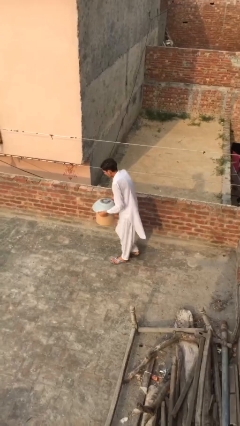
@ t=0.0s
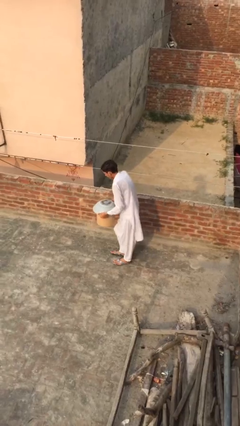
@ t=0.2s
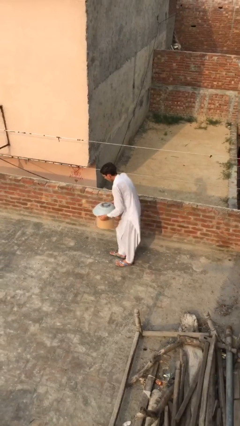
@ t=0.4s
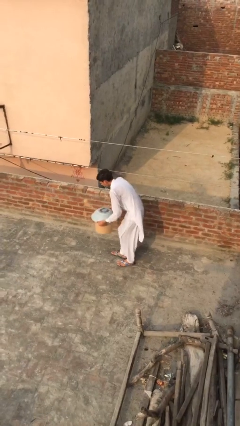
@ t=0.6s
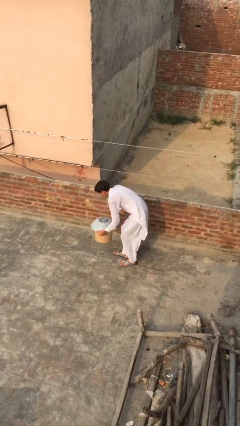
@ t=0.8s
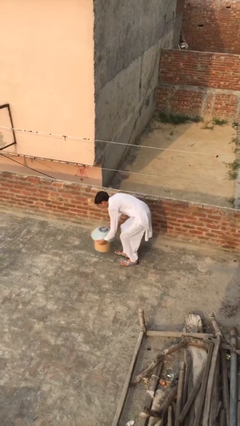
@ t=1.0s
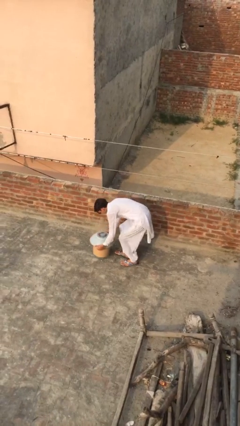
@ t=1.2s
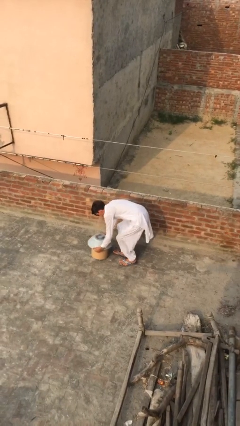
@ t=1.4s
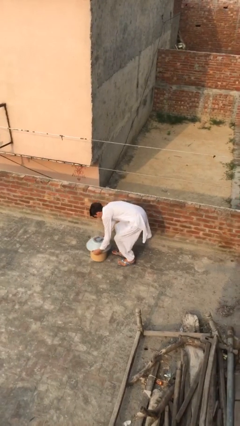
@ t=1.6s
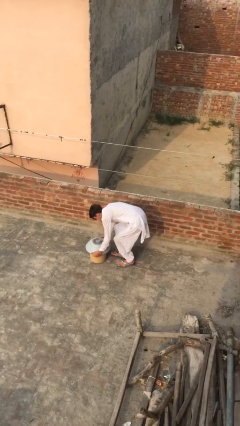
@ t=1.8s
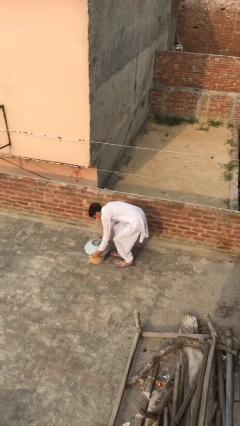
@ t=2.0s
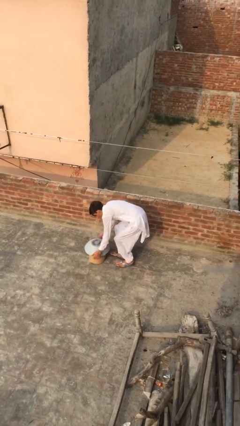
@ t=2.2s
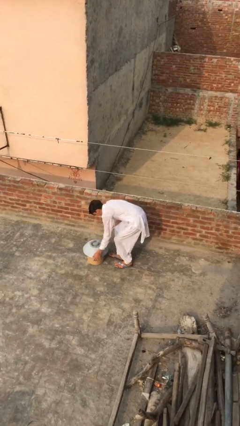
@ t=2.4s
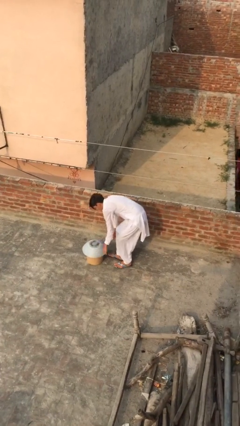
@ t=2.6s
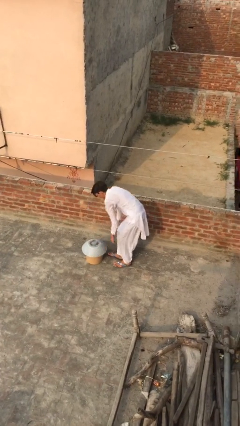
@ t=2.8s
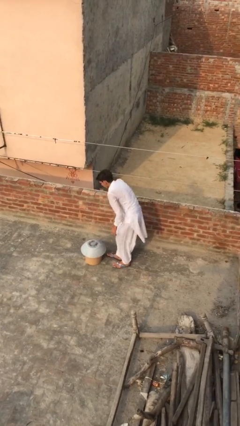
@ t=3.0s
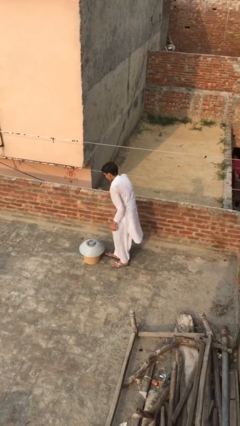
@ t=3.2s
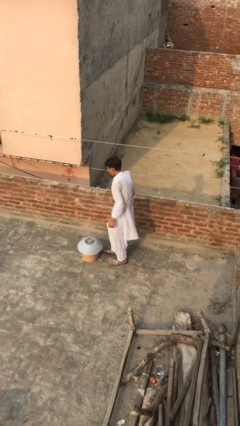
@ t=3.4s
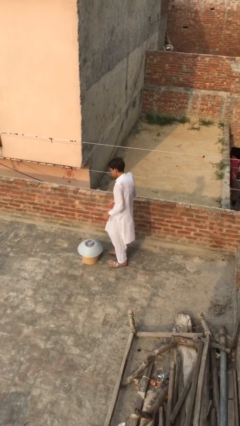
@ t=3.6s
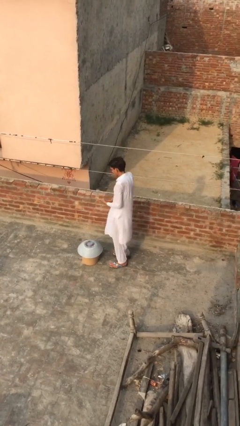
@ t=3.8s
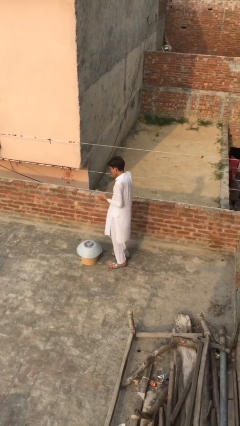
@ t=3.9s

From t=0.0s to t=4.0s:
person puts down object on floor

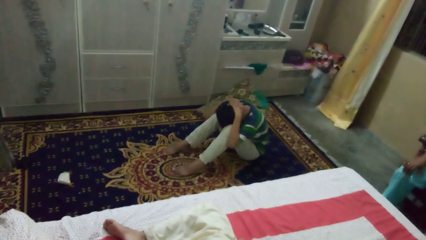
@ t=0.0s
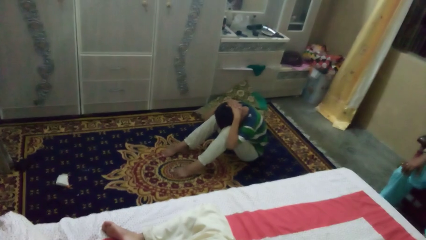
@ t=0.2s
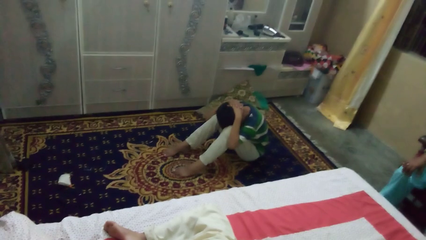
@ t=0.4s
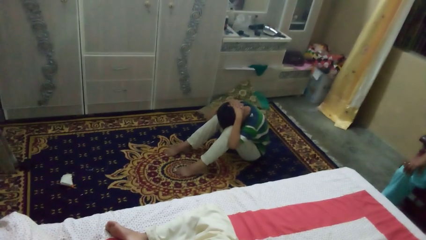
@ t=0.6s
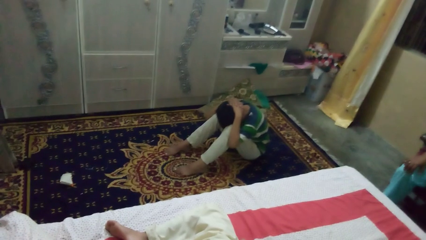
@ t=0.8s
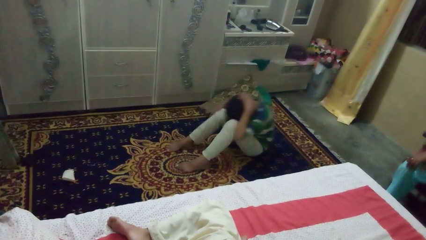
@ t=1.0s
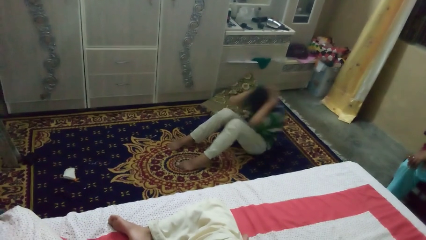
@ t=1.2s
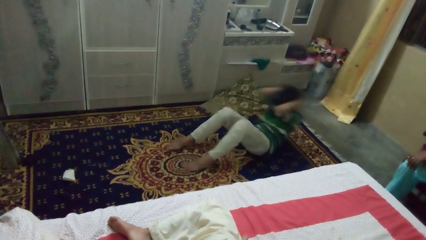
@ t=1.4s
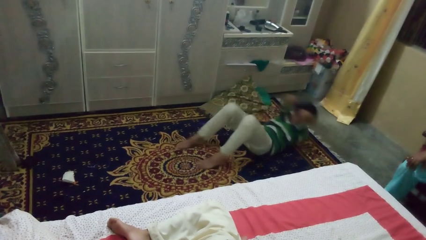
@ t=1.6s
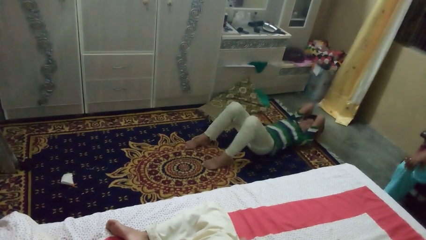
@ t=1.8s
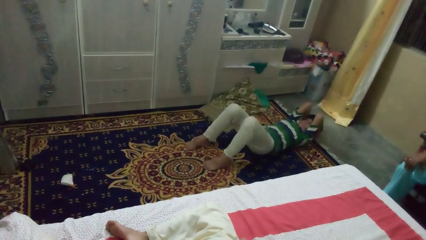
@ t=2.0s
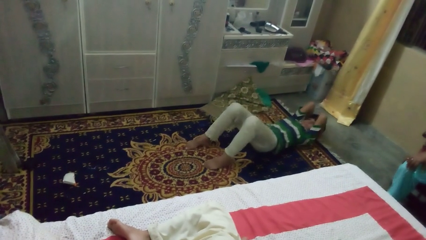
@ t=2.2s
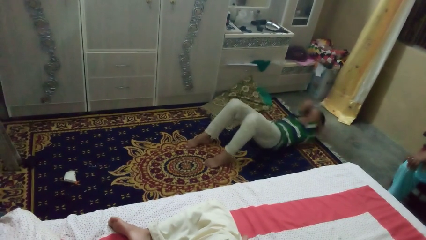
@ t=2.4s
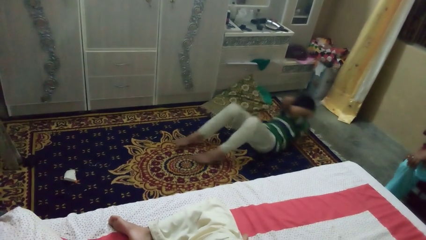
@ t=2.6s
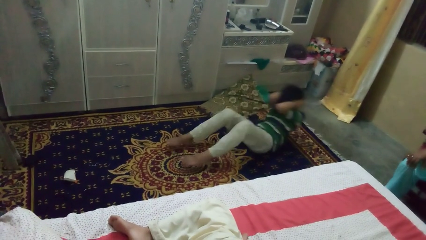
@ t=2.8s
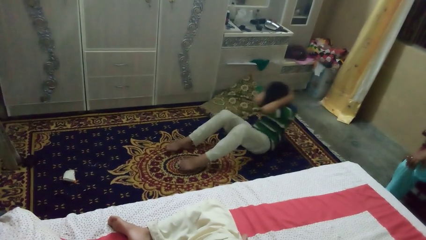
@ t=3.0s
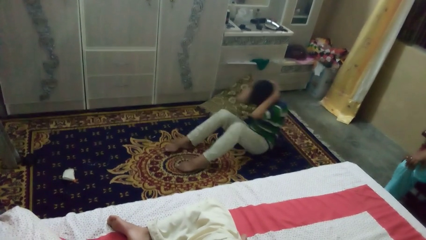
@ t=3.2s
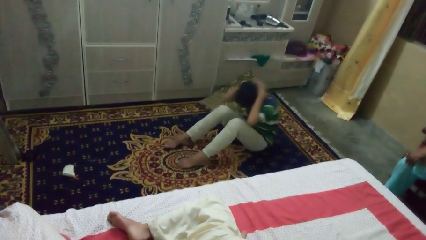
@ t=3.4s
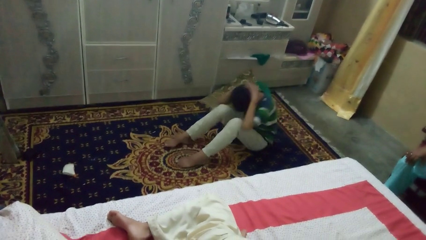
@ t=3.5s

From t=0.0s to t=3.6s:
person exercises with situp

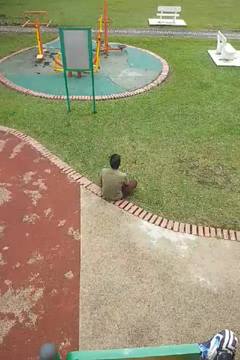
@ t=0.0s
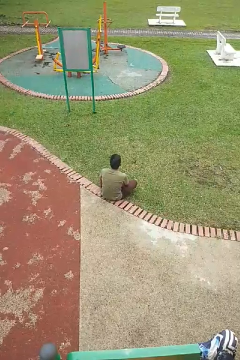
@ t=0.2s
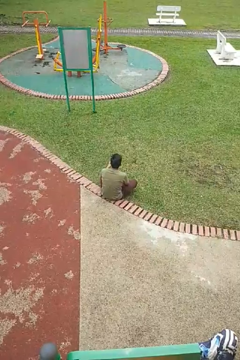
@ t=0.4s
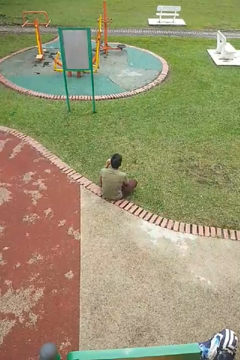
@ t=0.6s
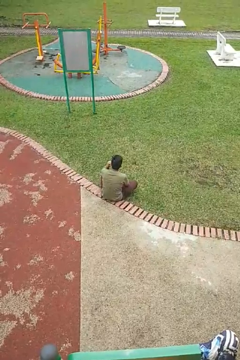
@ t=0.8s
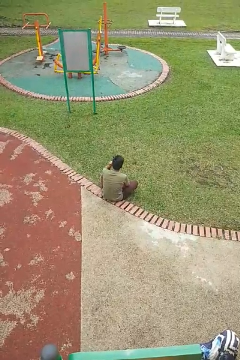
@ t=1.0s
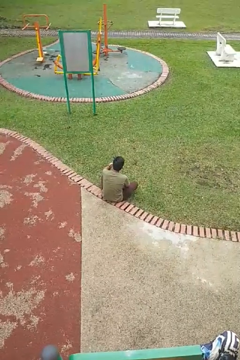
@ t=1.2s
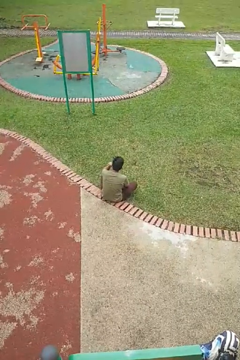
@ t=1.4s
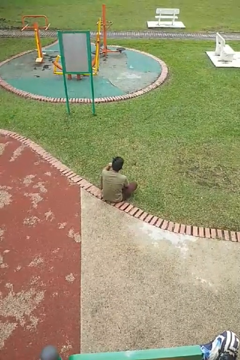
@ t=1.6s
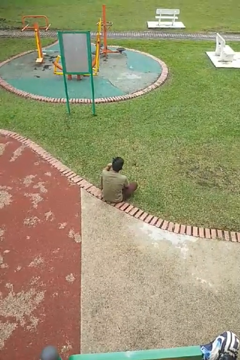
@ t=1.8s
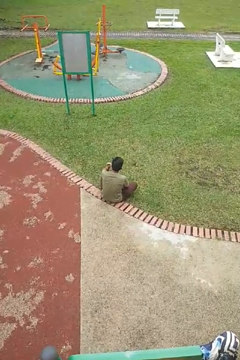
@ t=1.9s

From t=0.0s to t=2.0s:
person touches earlobe

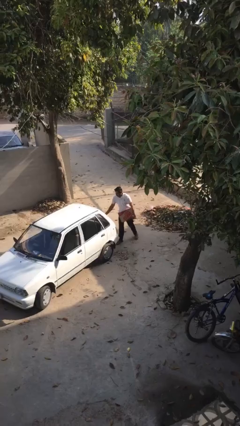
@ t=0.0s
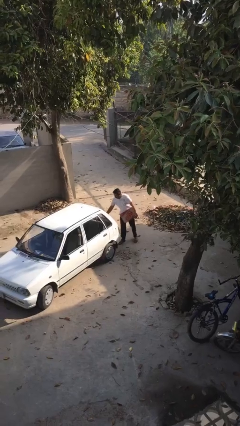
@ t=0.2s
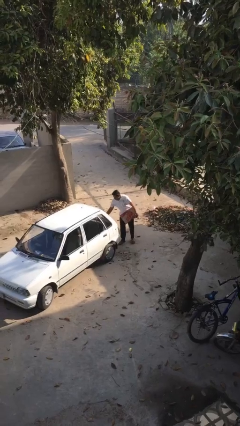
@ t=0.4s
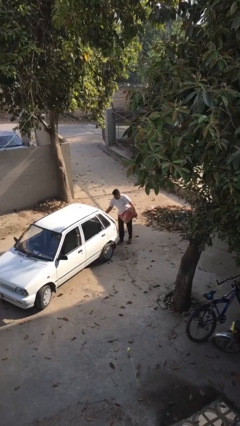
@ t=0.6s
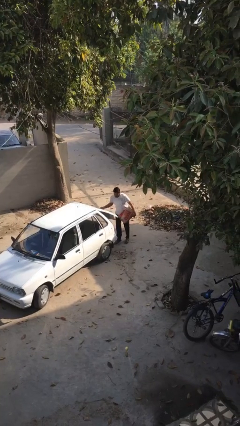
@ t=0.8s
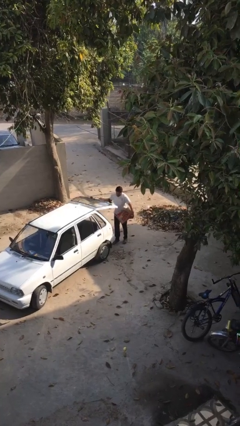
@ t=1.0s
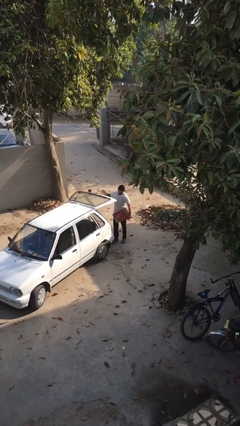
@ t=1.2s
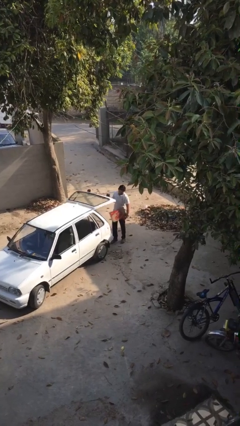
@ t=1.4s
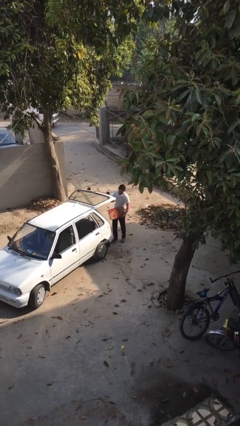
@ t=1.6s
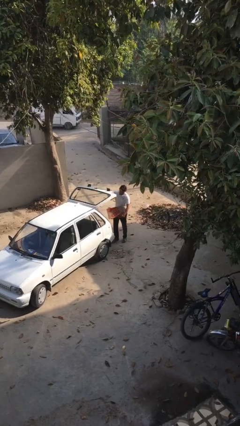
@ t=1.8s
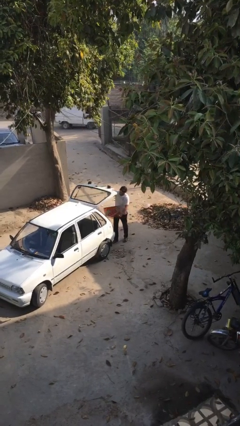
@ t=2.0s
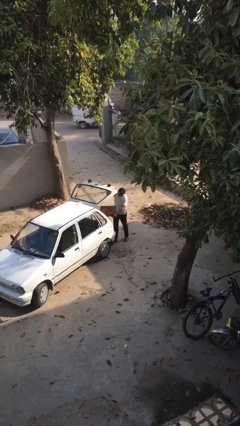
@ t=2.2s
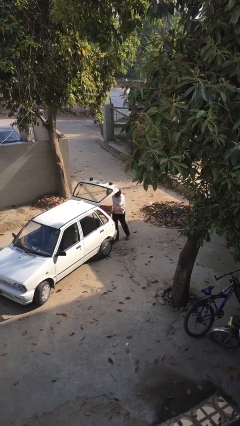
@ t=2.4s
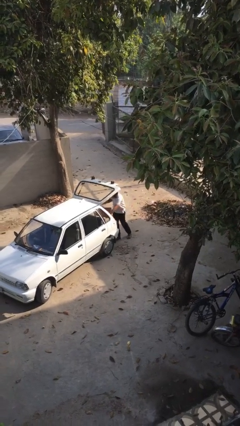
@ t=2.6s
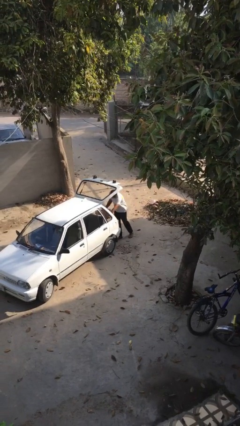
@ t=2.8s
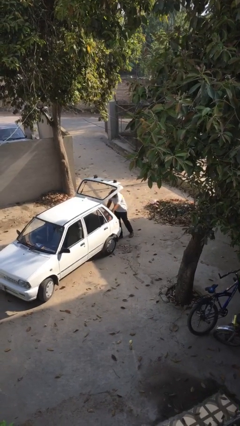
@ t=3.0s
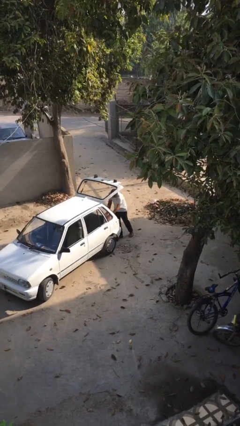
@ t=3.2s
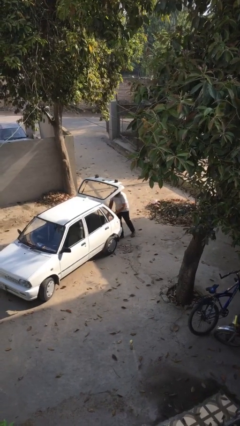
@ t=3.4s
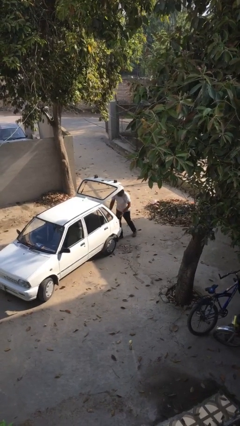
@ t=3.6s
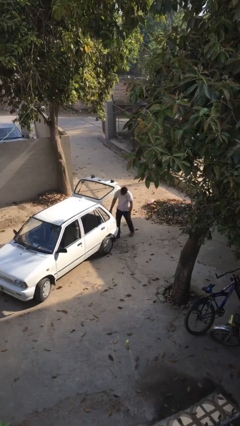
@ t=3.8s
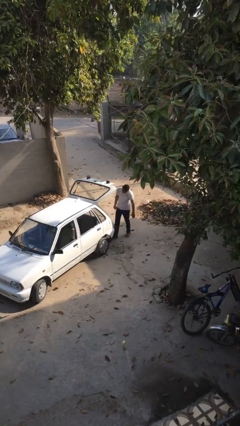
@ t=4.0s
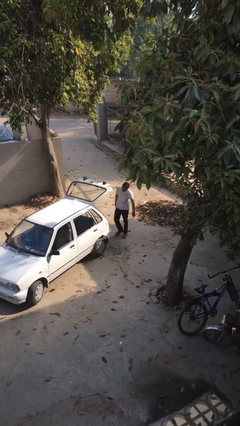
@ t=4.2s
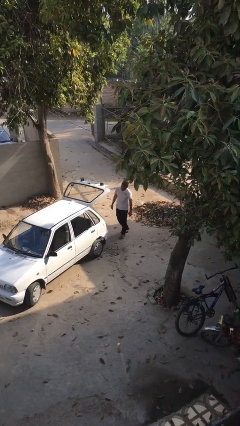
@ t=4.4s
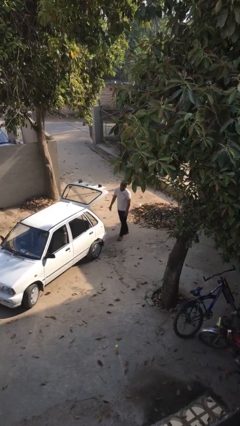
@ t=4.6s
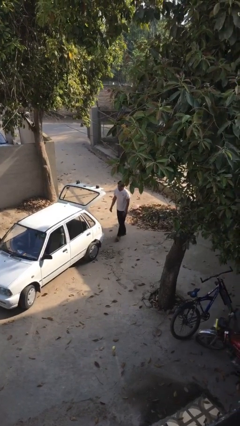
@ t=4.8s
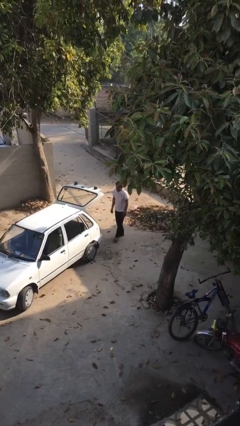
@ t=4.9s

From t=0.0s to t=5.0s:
person loads car

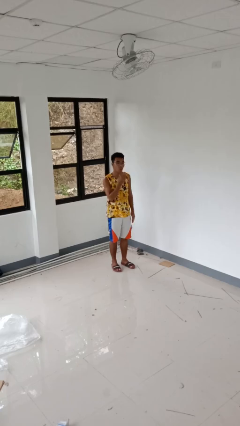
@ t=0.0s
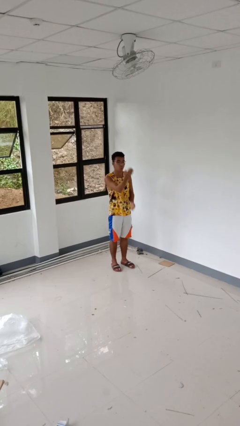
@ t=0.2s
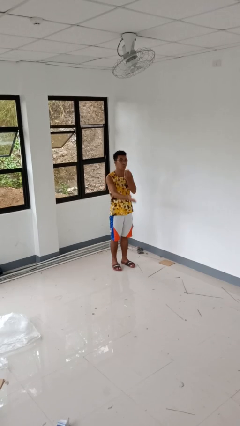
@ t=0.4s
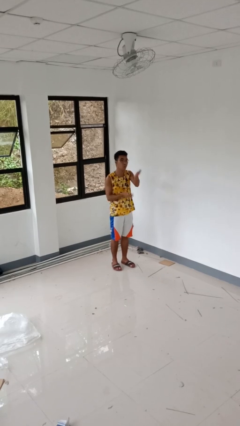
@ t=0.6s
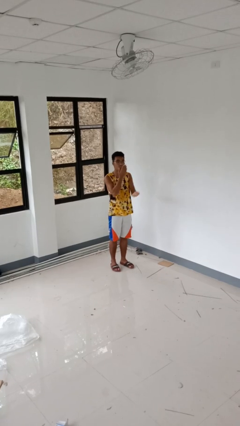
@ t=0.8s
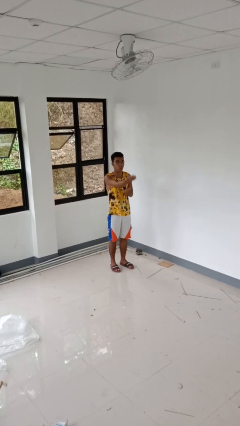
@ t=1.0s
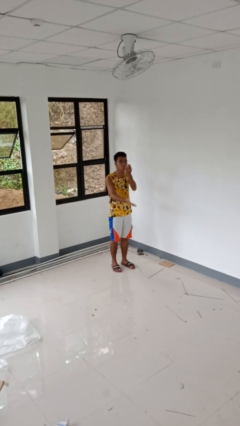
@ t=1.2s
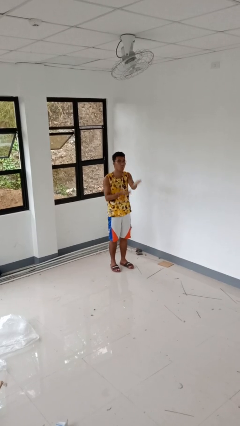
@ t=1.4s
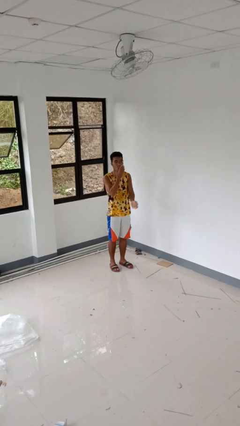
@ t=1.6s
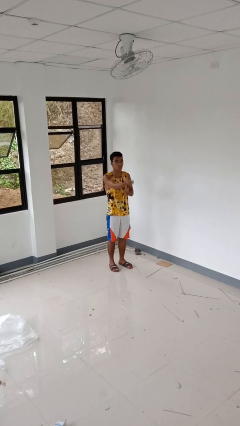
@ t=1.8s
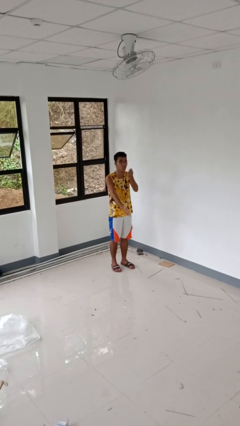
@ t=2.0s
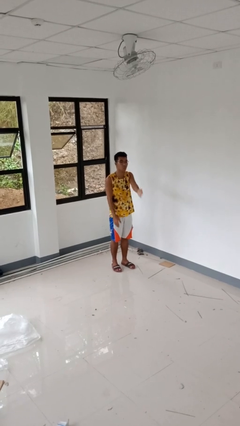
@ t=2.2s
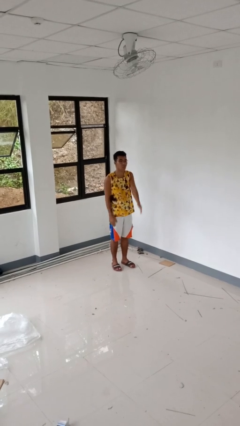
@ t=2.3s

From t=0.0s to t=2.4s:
person gestures blow kiss

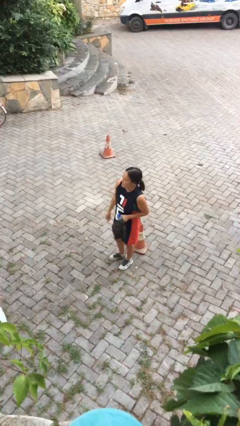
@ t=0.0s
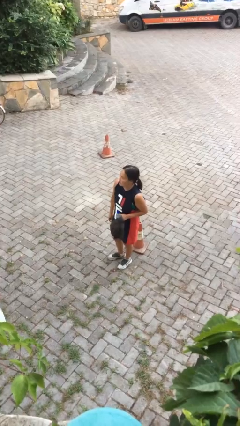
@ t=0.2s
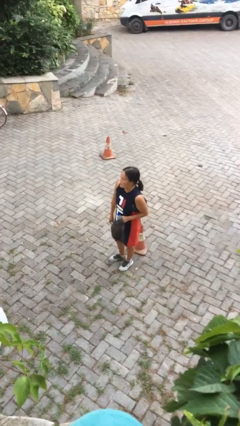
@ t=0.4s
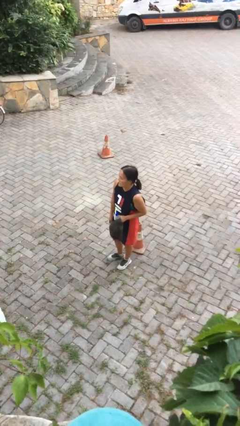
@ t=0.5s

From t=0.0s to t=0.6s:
person gestures come here

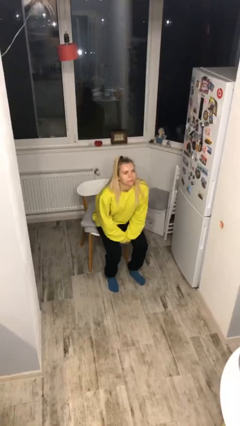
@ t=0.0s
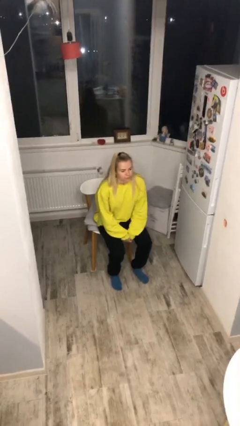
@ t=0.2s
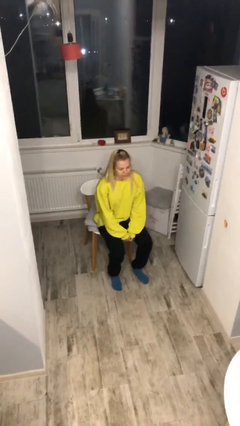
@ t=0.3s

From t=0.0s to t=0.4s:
person sits down
